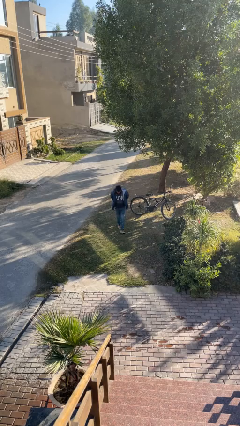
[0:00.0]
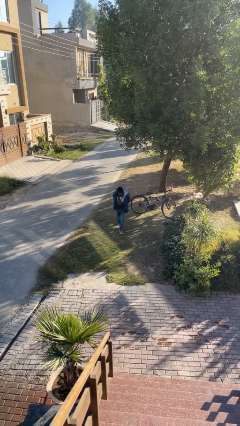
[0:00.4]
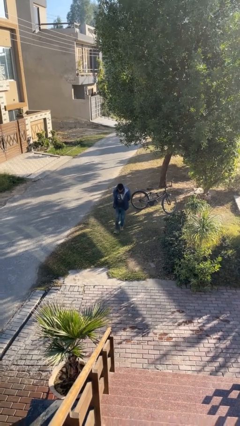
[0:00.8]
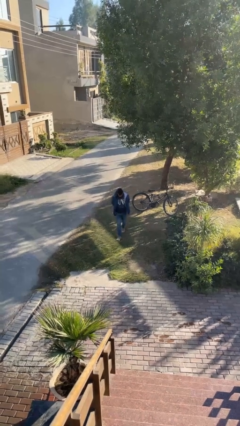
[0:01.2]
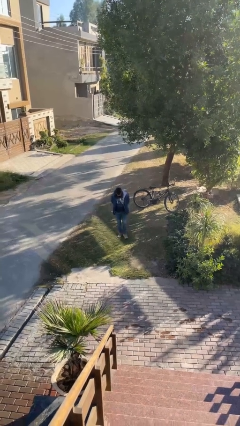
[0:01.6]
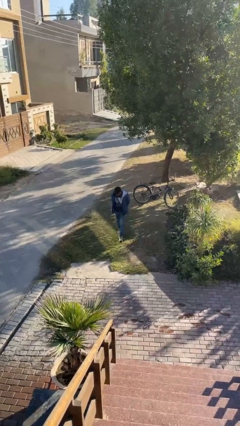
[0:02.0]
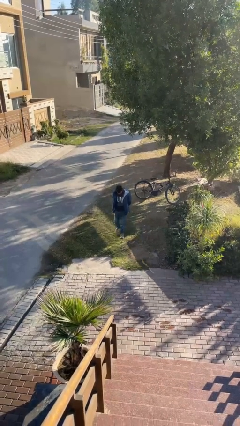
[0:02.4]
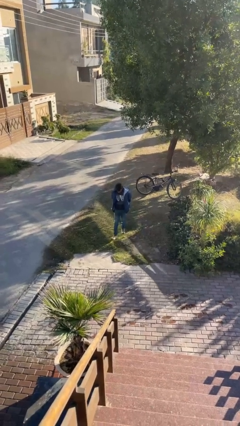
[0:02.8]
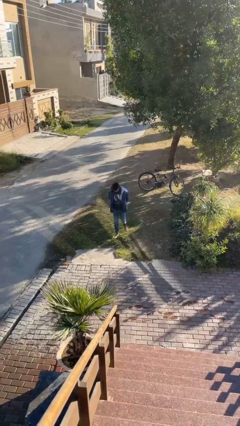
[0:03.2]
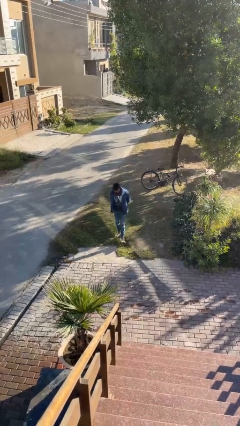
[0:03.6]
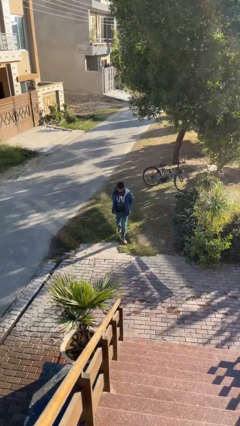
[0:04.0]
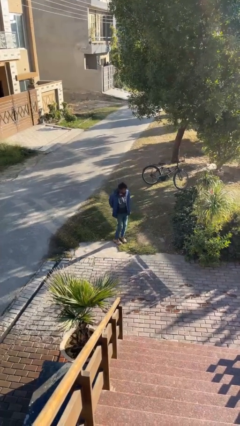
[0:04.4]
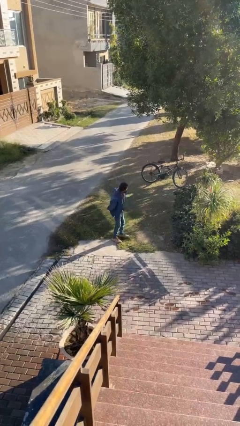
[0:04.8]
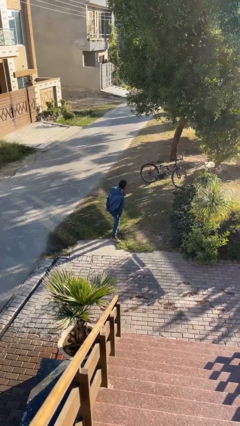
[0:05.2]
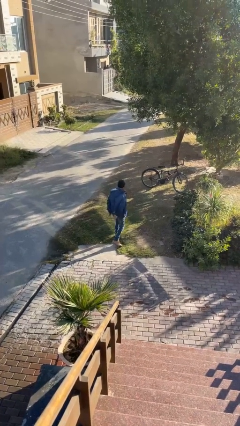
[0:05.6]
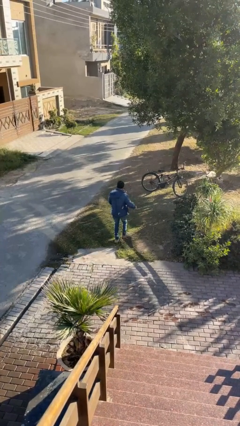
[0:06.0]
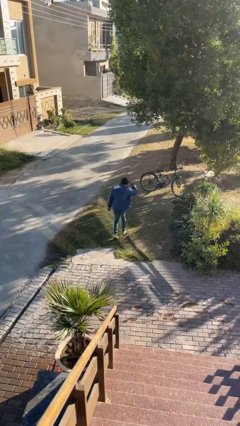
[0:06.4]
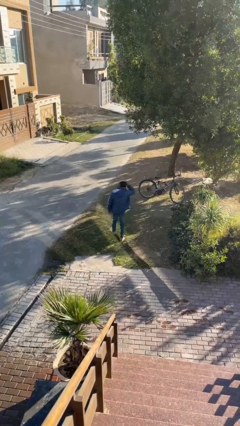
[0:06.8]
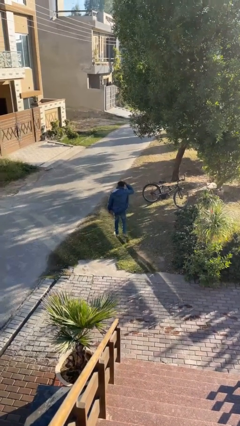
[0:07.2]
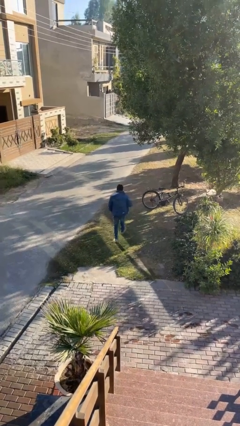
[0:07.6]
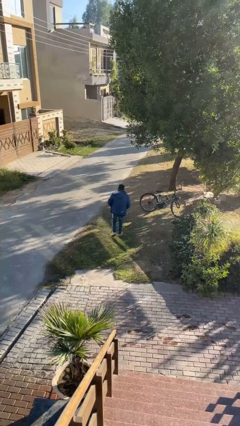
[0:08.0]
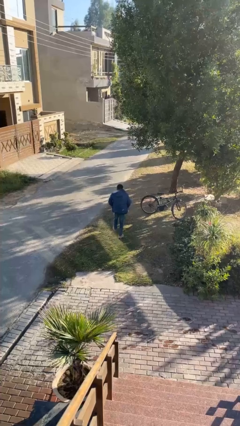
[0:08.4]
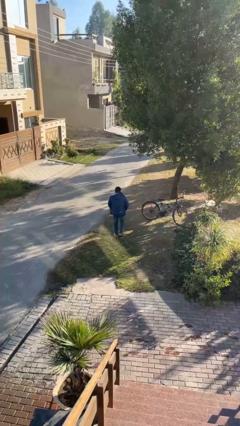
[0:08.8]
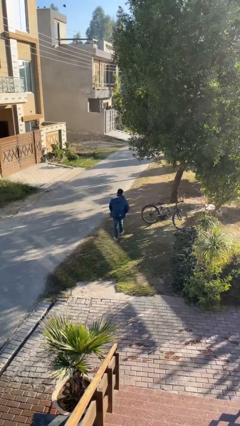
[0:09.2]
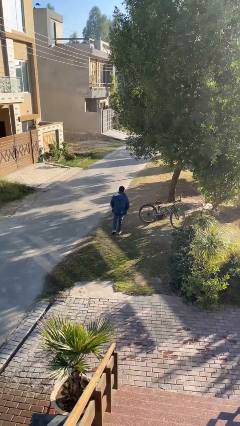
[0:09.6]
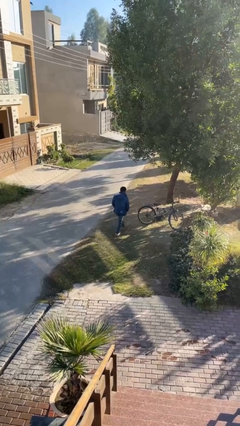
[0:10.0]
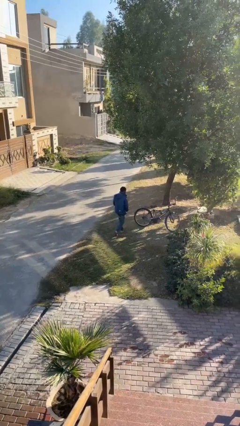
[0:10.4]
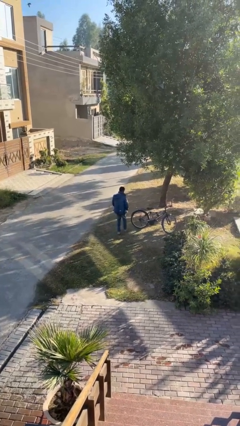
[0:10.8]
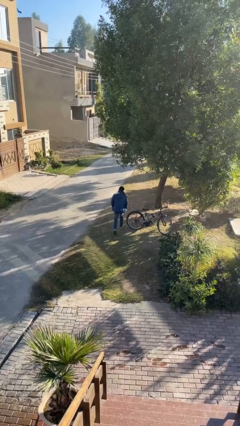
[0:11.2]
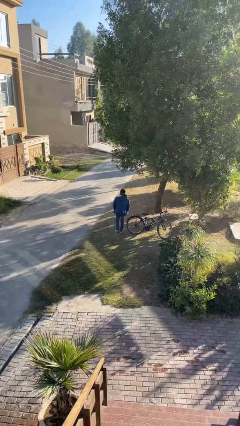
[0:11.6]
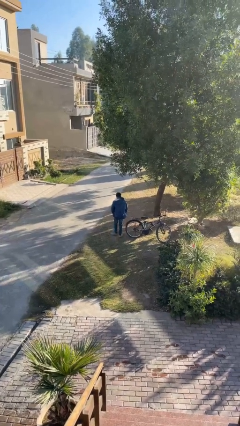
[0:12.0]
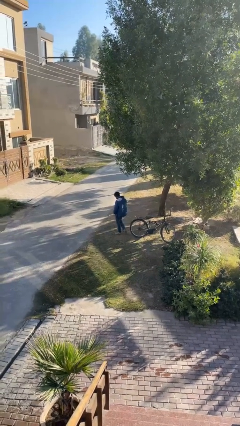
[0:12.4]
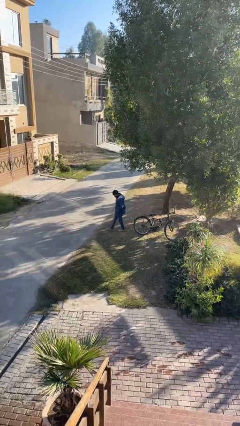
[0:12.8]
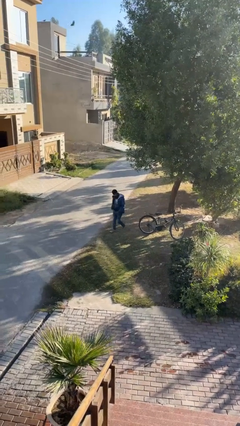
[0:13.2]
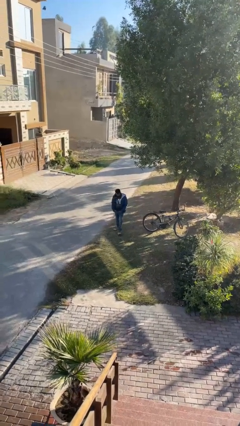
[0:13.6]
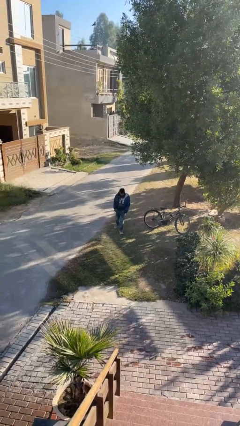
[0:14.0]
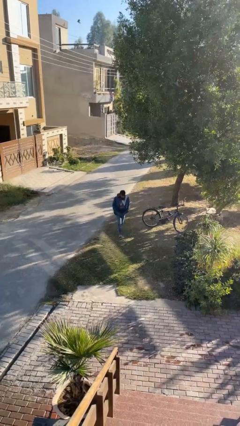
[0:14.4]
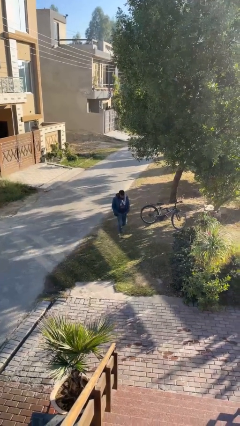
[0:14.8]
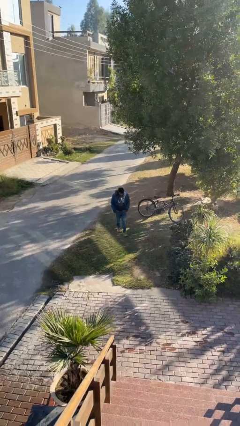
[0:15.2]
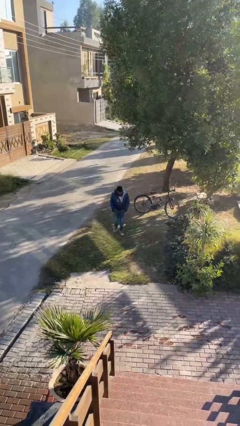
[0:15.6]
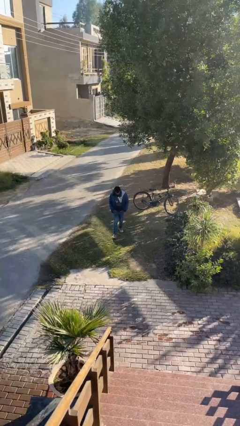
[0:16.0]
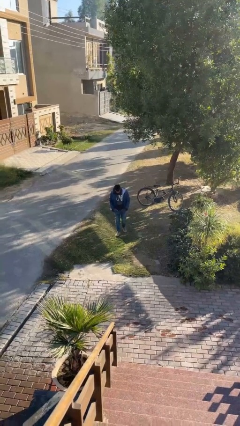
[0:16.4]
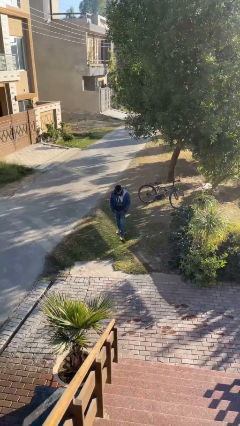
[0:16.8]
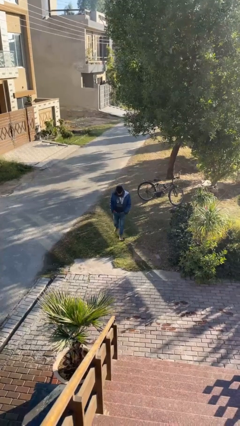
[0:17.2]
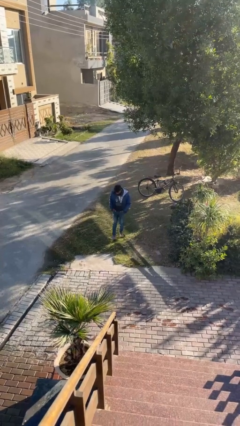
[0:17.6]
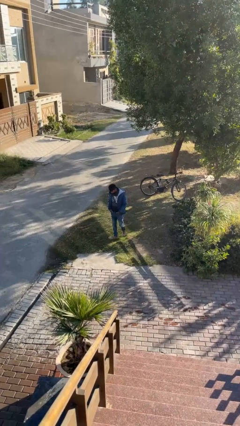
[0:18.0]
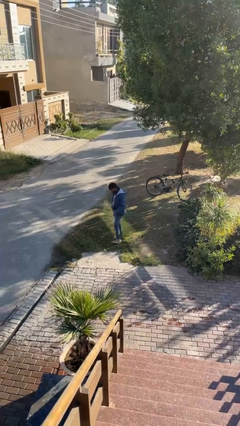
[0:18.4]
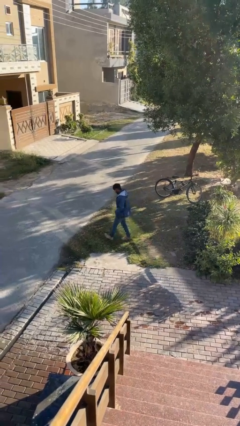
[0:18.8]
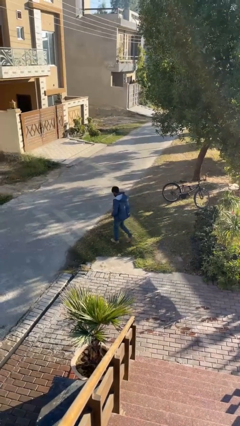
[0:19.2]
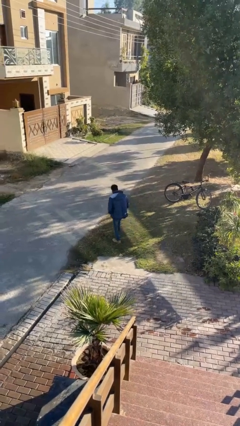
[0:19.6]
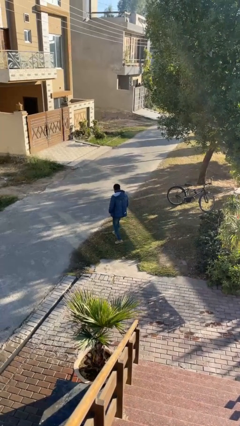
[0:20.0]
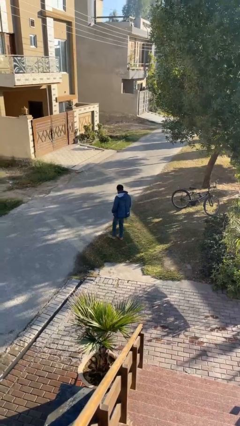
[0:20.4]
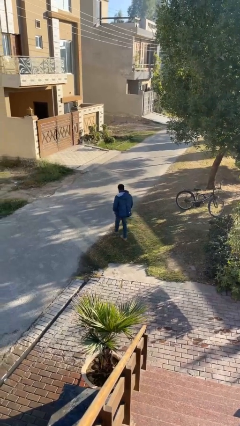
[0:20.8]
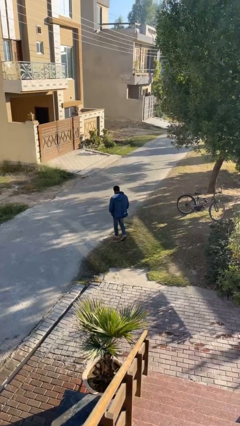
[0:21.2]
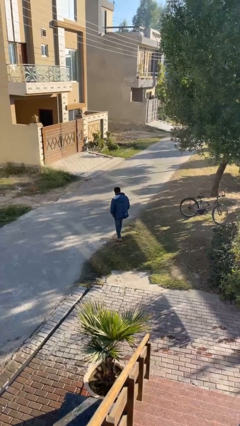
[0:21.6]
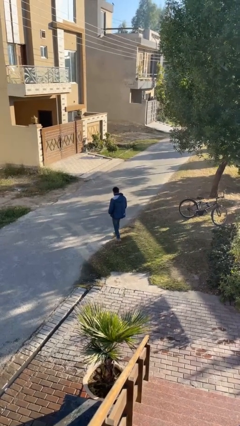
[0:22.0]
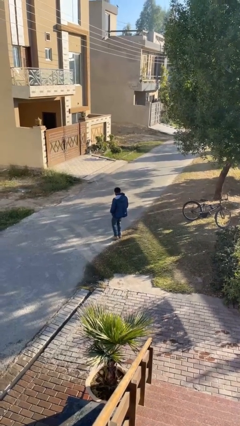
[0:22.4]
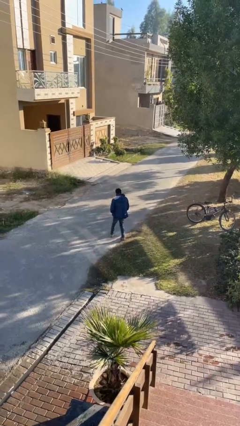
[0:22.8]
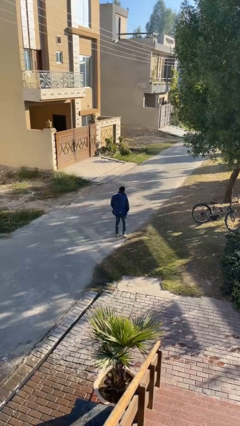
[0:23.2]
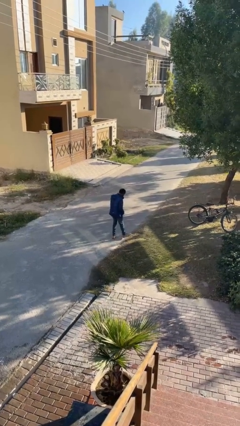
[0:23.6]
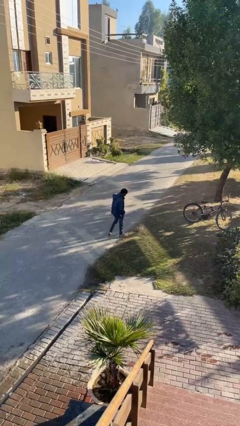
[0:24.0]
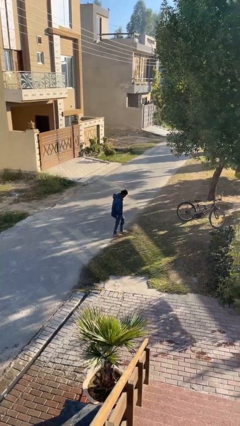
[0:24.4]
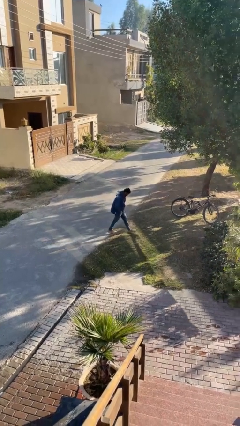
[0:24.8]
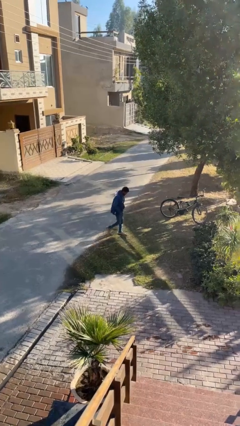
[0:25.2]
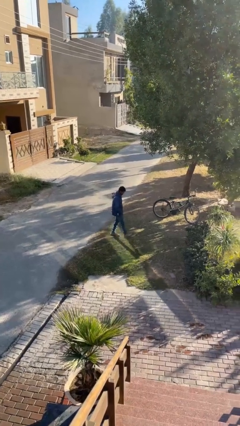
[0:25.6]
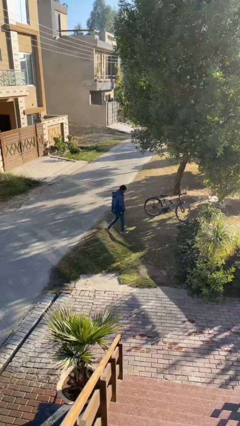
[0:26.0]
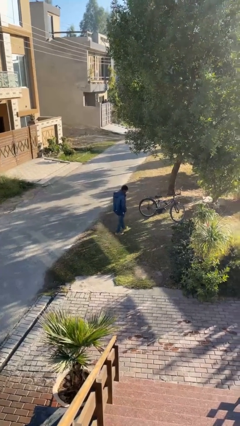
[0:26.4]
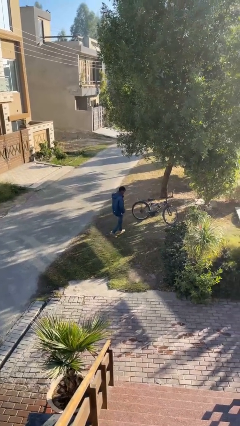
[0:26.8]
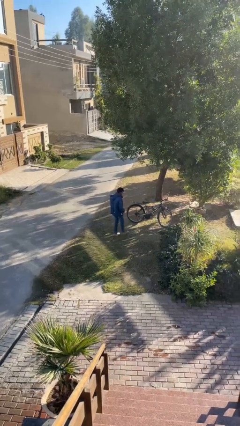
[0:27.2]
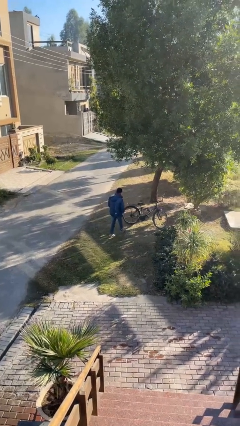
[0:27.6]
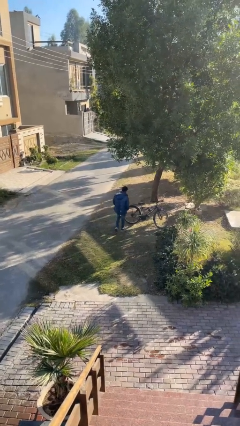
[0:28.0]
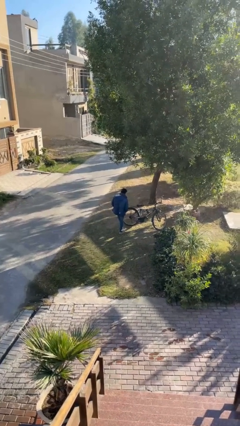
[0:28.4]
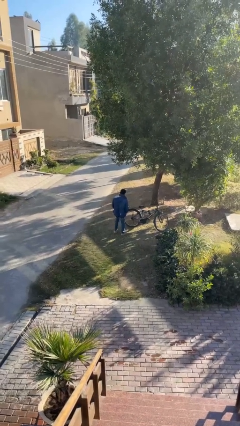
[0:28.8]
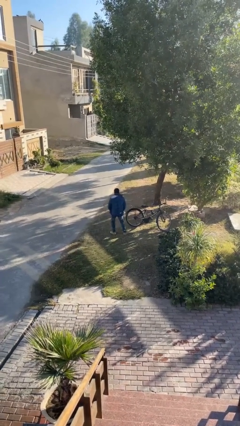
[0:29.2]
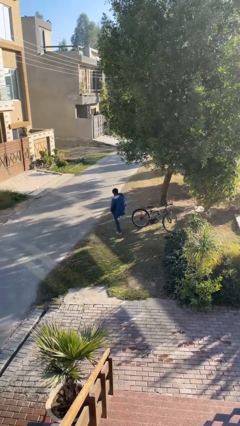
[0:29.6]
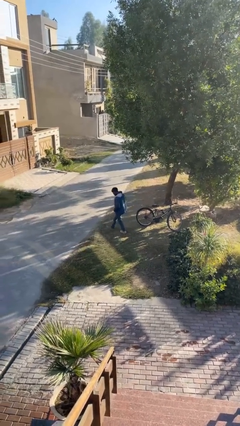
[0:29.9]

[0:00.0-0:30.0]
person walks

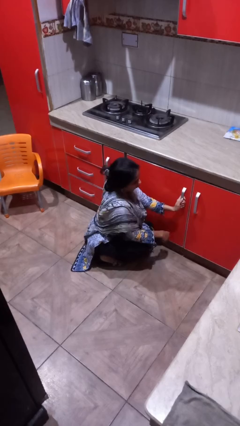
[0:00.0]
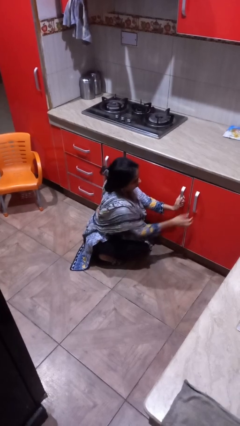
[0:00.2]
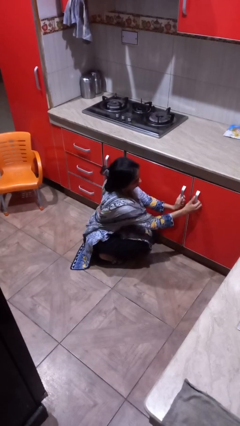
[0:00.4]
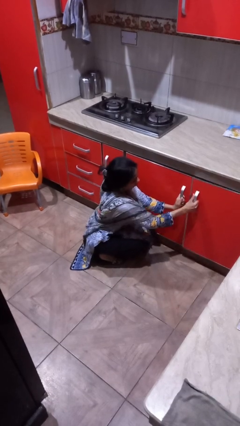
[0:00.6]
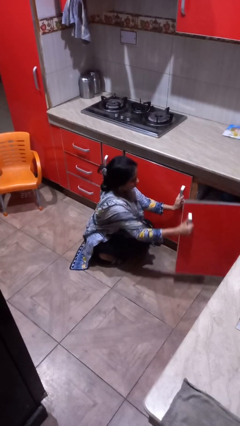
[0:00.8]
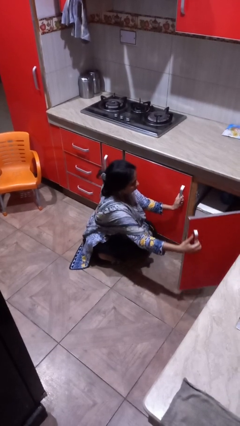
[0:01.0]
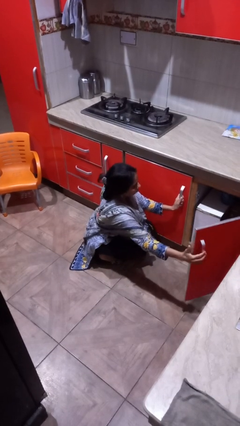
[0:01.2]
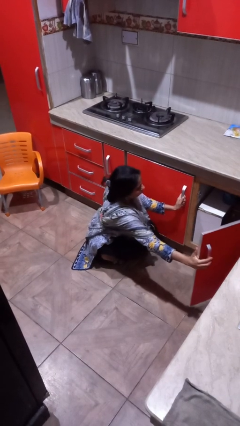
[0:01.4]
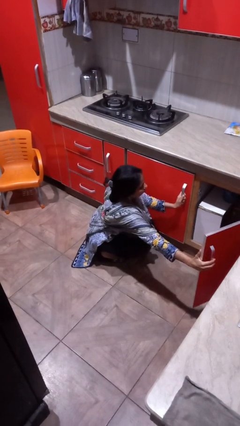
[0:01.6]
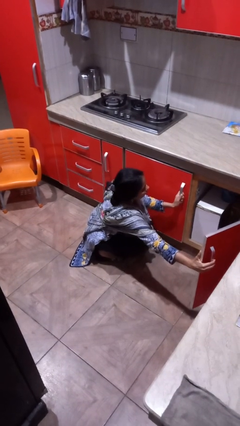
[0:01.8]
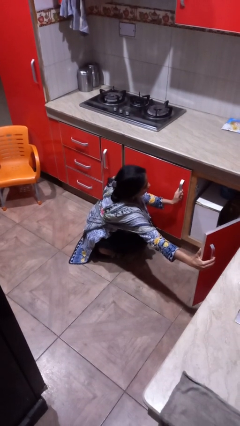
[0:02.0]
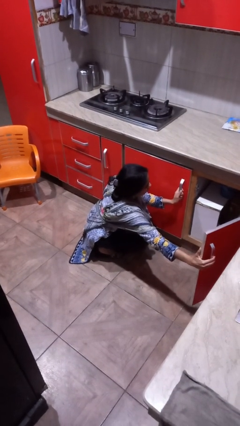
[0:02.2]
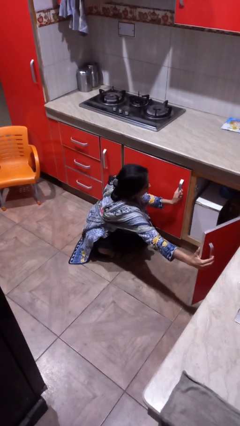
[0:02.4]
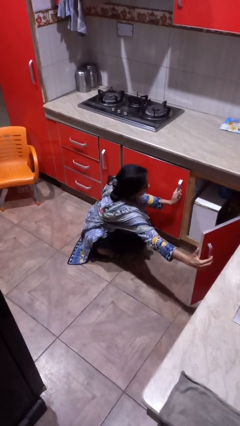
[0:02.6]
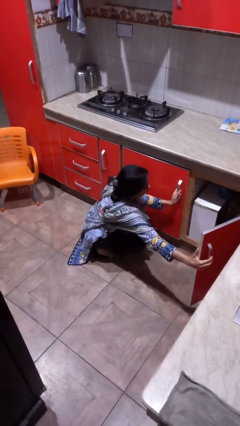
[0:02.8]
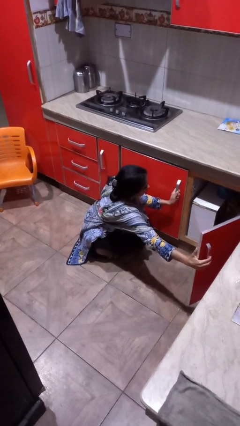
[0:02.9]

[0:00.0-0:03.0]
person opens cabinet

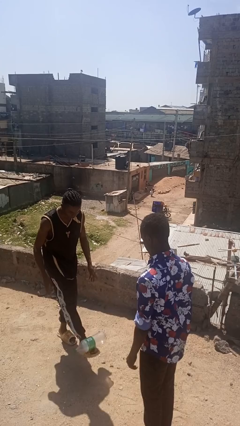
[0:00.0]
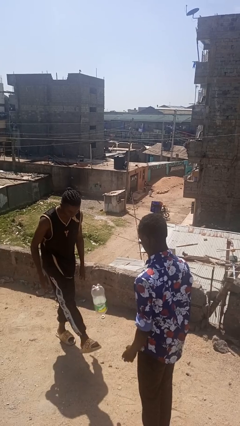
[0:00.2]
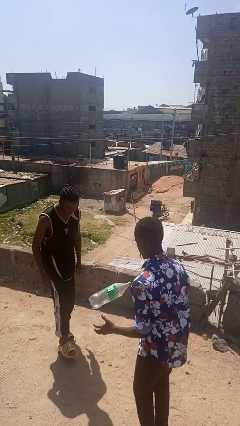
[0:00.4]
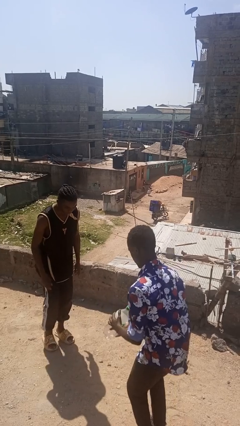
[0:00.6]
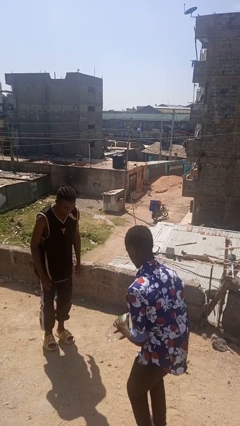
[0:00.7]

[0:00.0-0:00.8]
person kicks object to person
